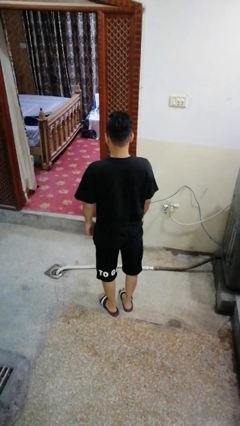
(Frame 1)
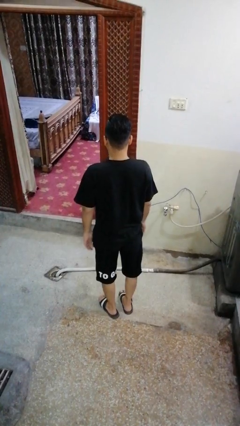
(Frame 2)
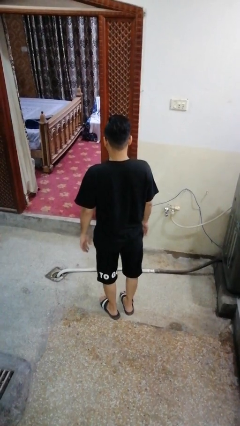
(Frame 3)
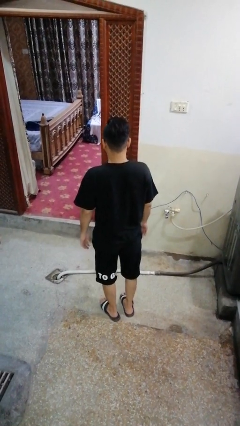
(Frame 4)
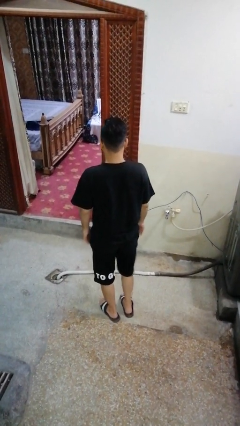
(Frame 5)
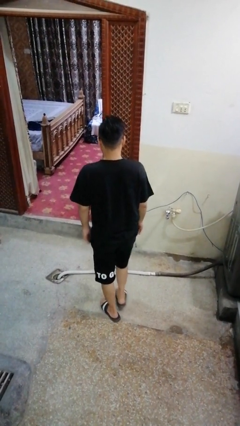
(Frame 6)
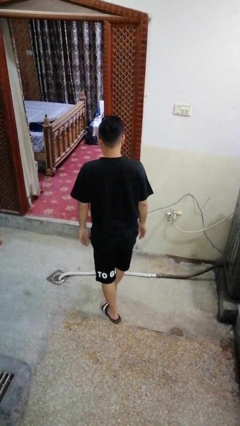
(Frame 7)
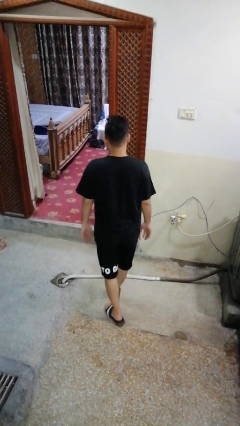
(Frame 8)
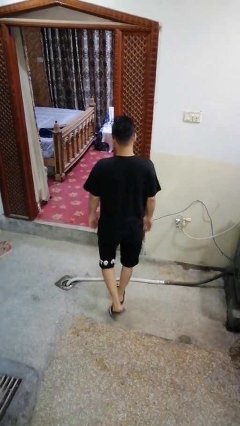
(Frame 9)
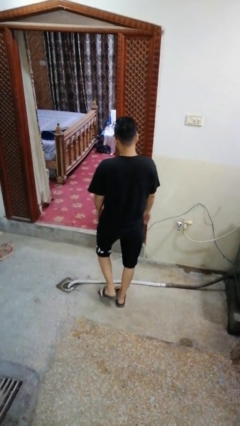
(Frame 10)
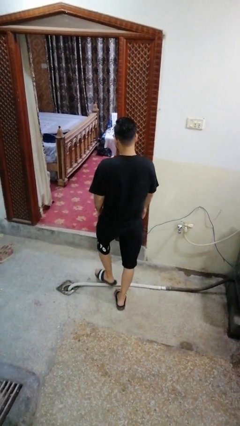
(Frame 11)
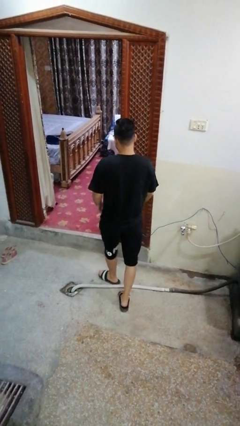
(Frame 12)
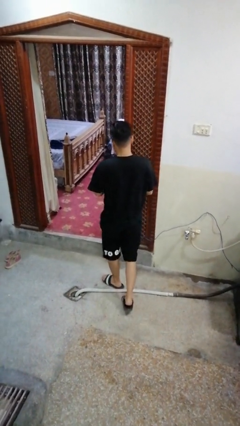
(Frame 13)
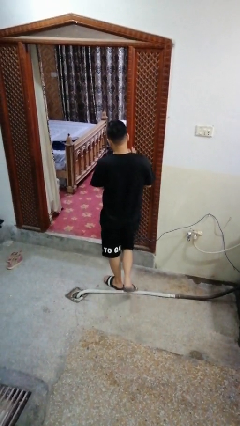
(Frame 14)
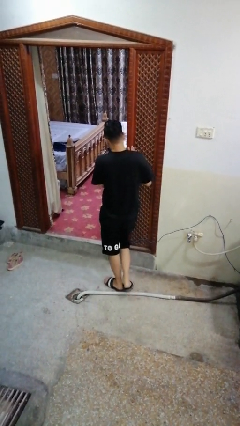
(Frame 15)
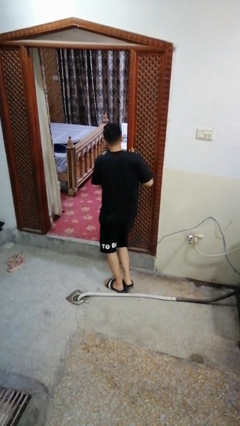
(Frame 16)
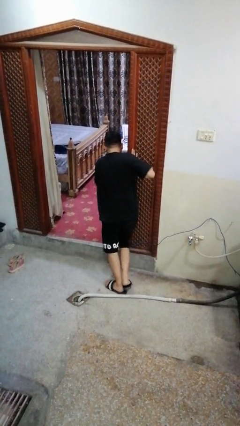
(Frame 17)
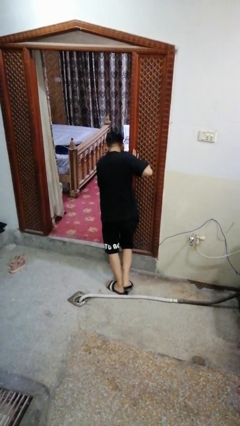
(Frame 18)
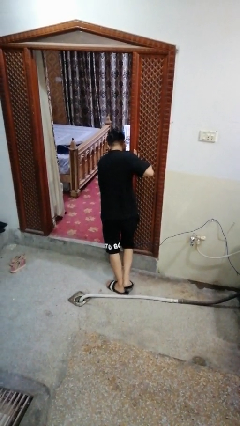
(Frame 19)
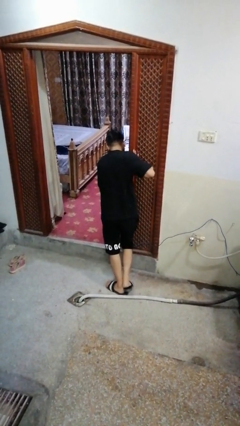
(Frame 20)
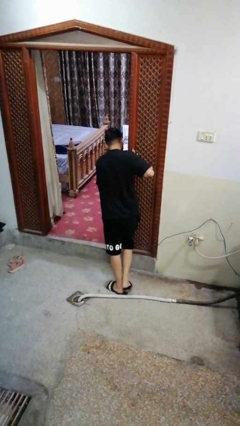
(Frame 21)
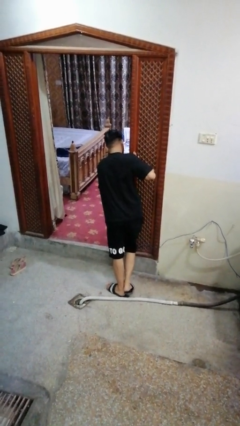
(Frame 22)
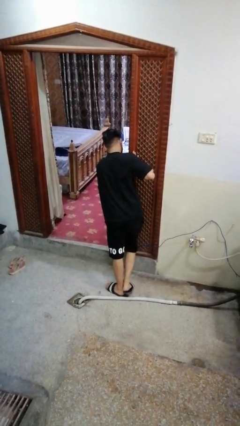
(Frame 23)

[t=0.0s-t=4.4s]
person bumps into wall

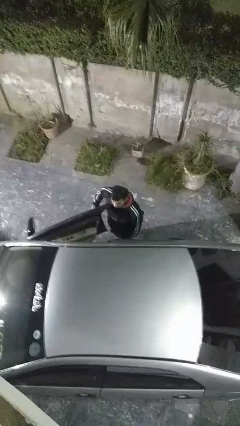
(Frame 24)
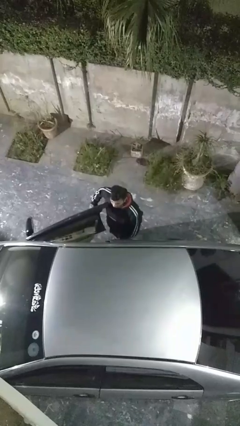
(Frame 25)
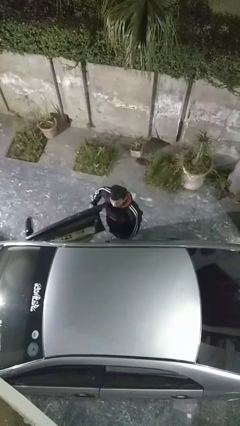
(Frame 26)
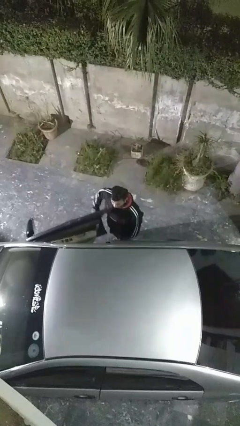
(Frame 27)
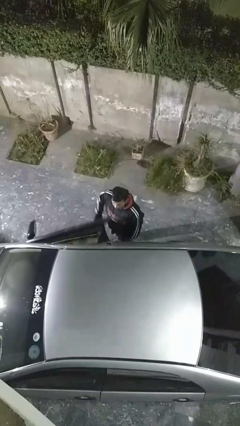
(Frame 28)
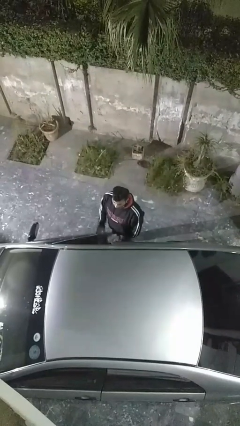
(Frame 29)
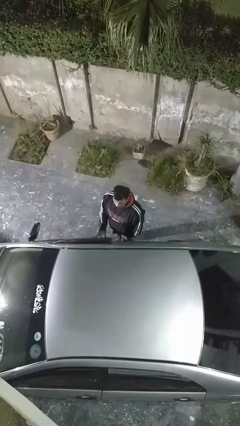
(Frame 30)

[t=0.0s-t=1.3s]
person closes car door

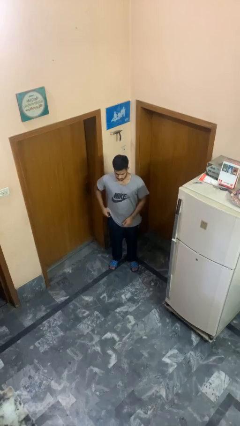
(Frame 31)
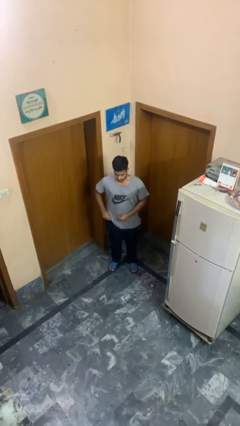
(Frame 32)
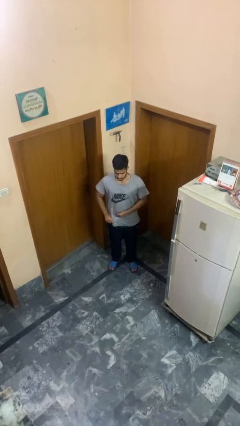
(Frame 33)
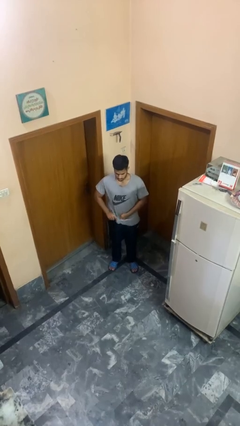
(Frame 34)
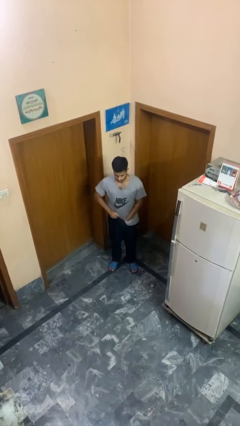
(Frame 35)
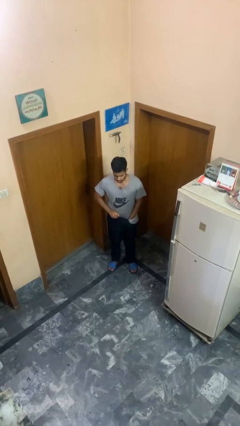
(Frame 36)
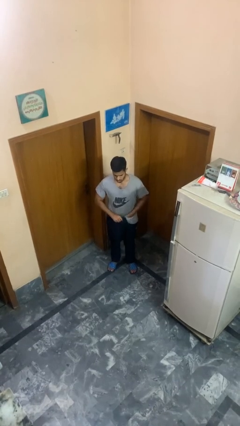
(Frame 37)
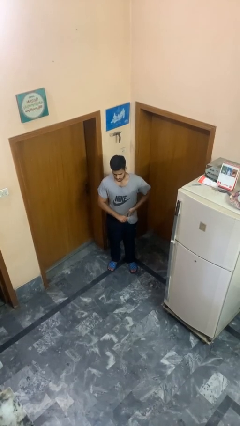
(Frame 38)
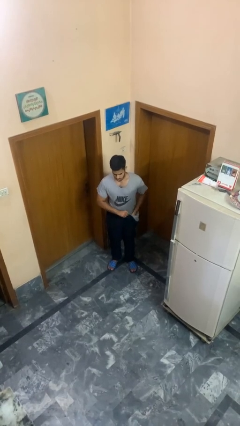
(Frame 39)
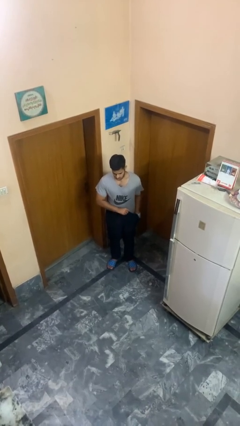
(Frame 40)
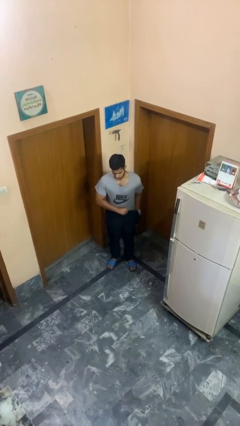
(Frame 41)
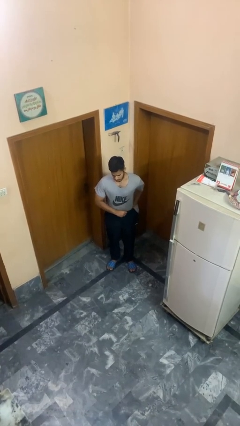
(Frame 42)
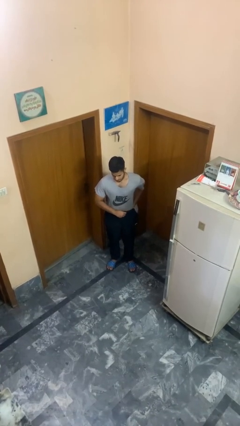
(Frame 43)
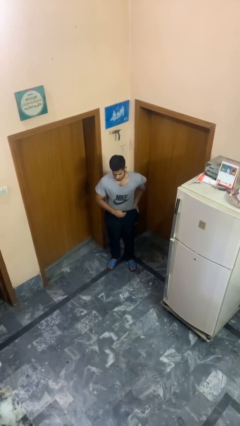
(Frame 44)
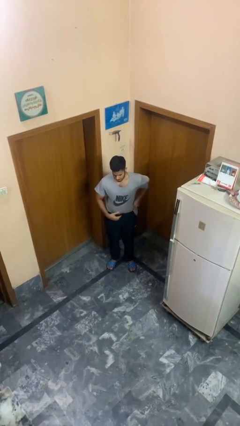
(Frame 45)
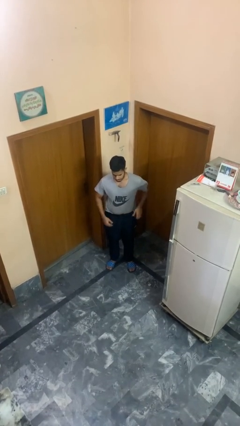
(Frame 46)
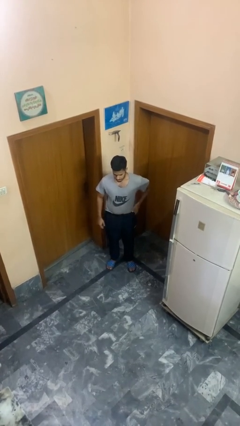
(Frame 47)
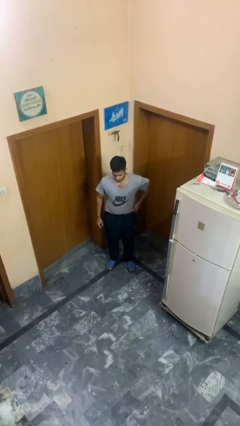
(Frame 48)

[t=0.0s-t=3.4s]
person tucks in shirt

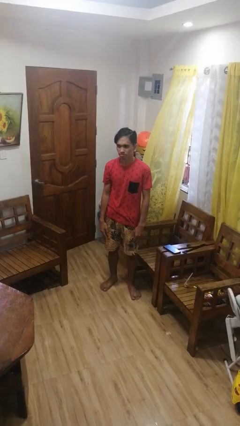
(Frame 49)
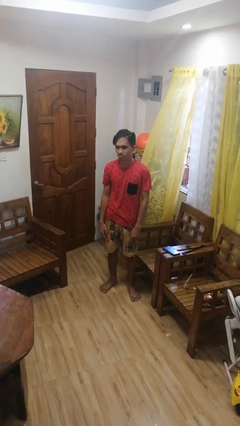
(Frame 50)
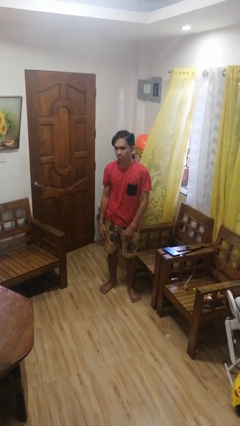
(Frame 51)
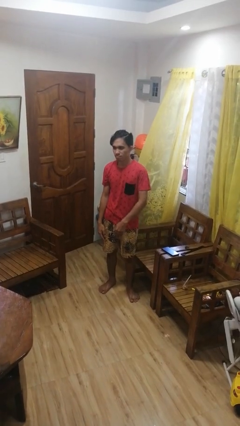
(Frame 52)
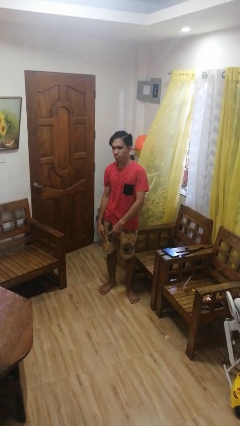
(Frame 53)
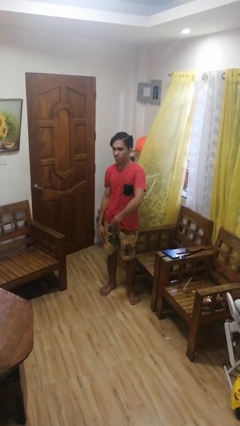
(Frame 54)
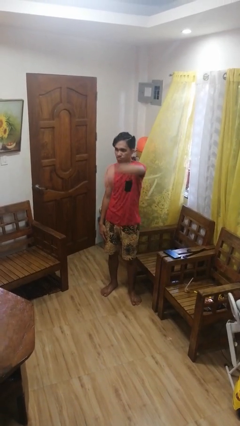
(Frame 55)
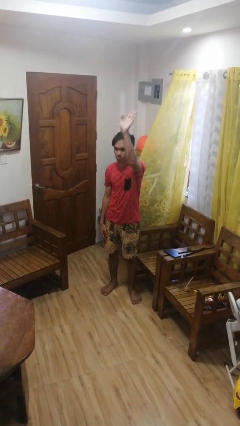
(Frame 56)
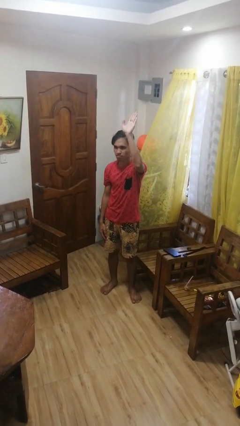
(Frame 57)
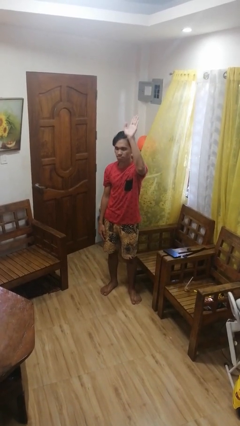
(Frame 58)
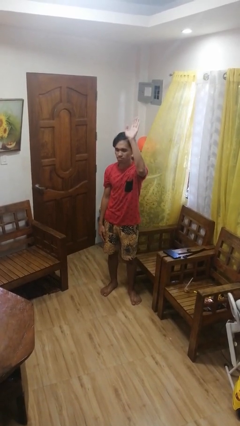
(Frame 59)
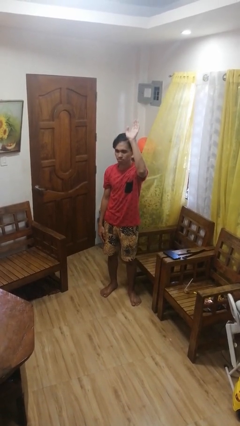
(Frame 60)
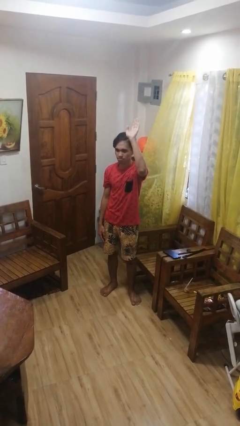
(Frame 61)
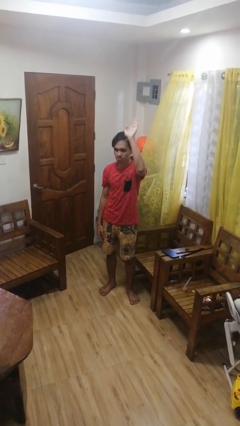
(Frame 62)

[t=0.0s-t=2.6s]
person gestures swipe up

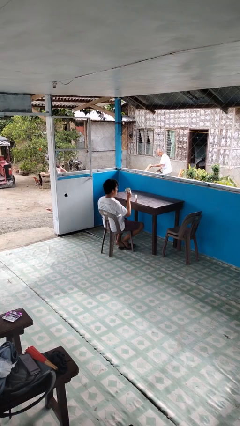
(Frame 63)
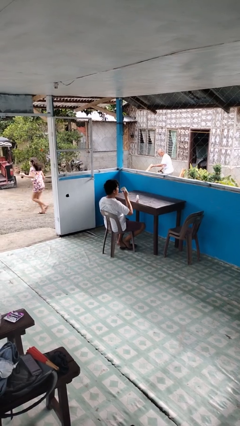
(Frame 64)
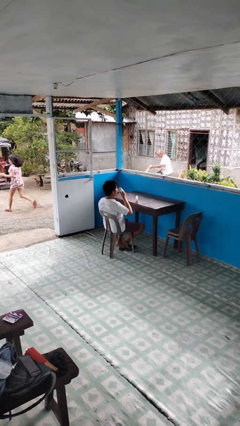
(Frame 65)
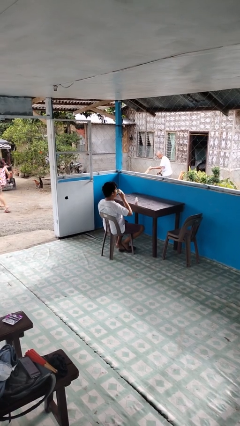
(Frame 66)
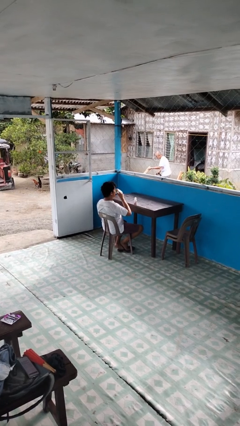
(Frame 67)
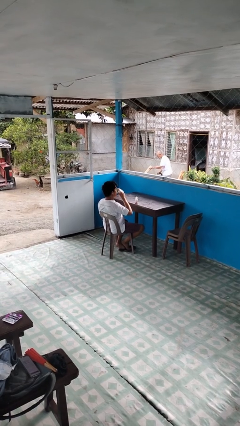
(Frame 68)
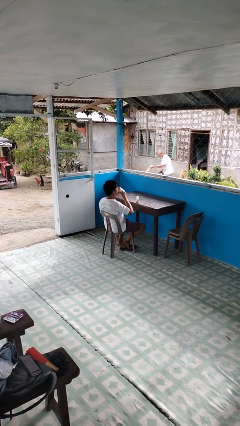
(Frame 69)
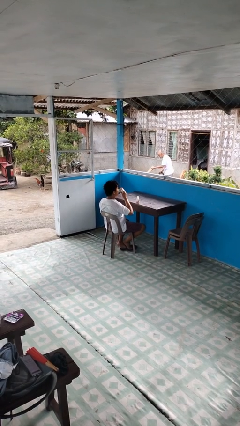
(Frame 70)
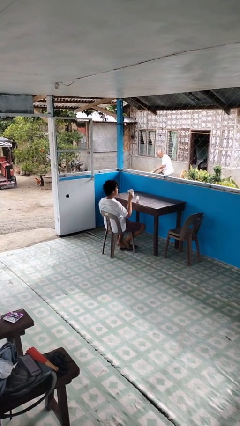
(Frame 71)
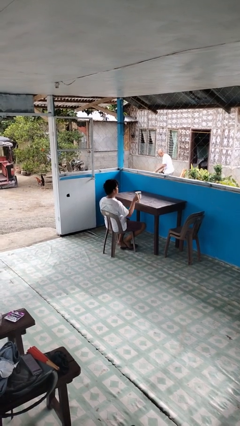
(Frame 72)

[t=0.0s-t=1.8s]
person drinks from cup

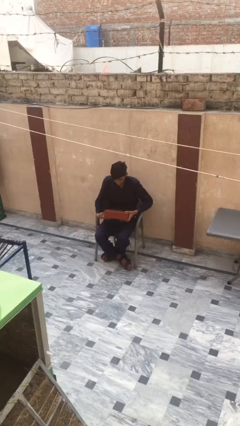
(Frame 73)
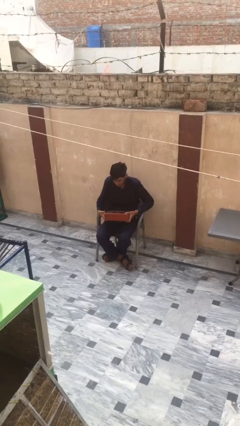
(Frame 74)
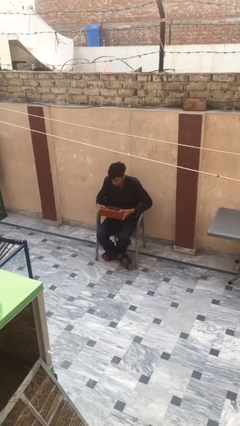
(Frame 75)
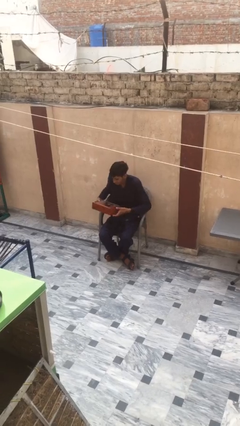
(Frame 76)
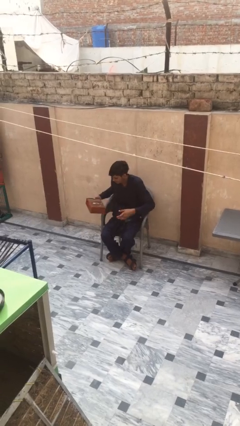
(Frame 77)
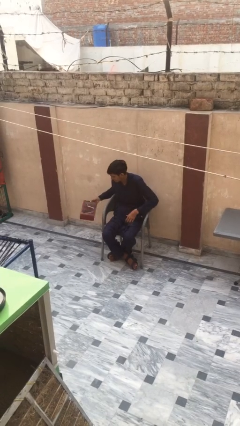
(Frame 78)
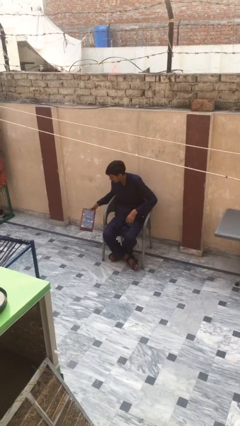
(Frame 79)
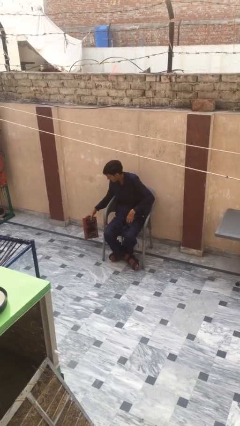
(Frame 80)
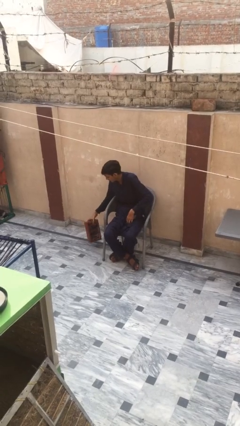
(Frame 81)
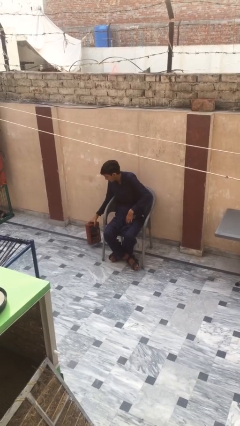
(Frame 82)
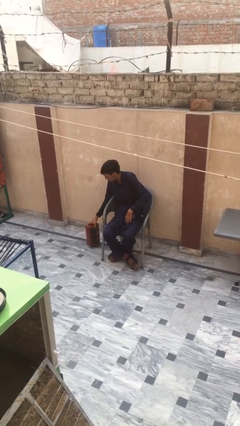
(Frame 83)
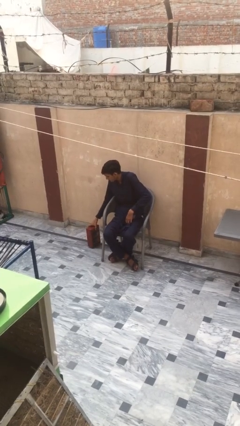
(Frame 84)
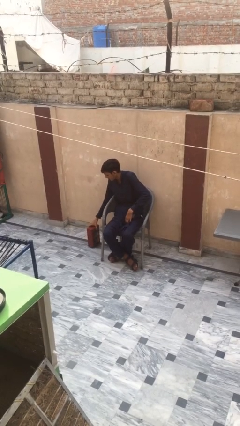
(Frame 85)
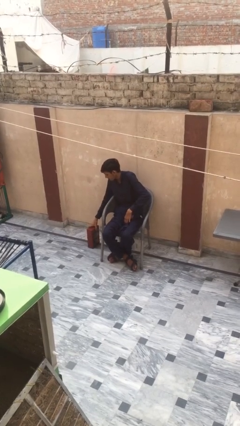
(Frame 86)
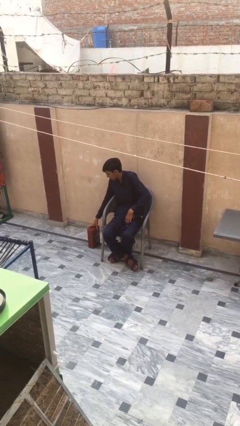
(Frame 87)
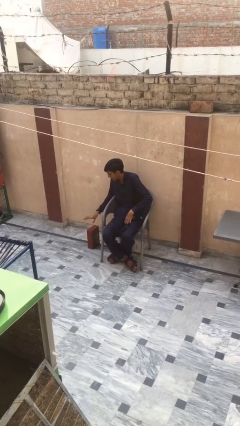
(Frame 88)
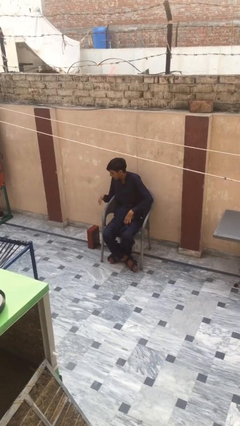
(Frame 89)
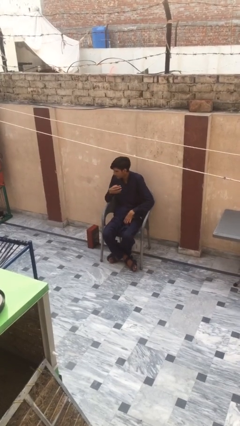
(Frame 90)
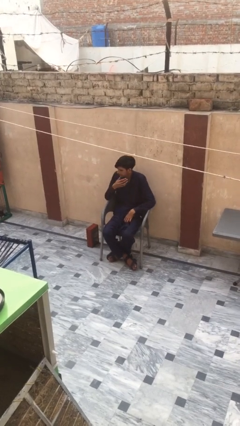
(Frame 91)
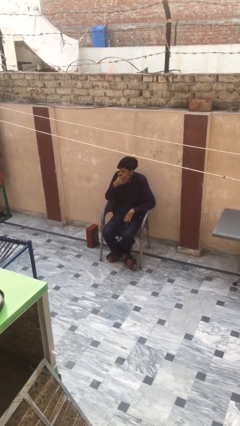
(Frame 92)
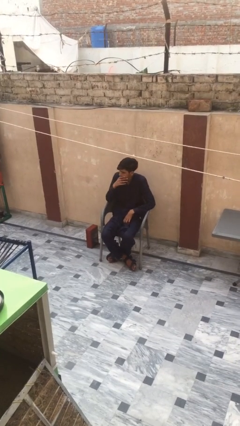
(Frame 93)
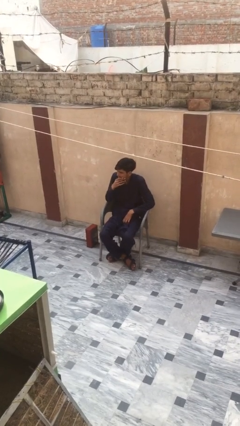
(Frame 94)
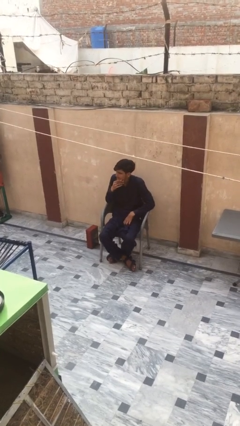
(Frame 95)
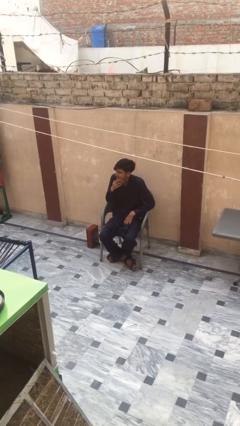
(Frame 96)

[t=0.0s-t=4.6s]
person puts down object on floor
